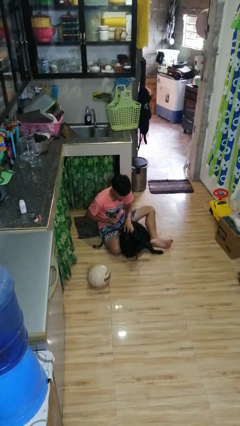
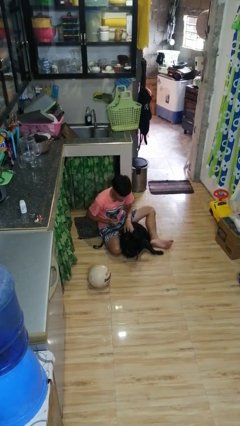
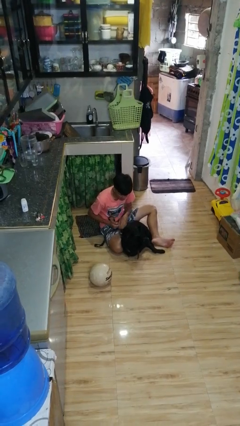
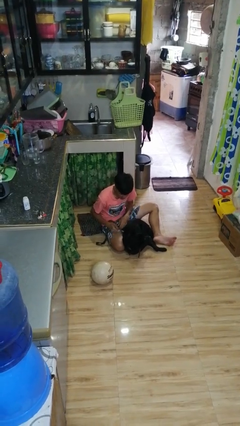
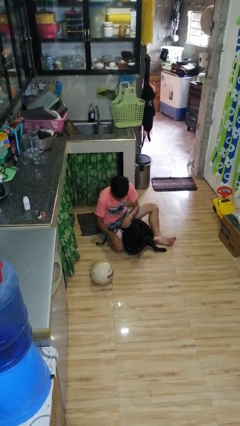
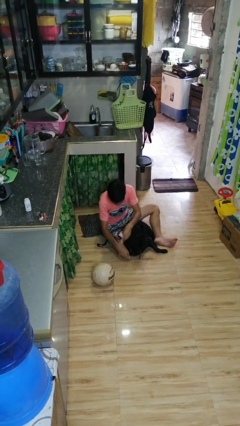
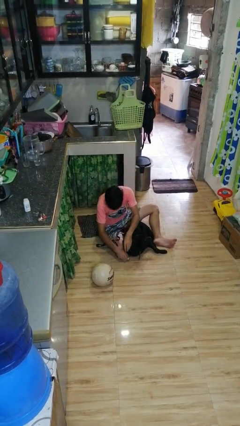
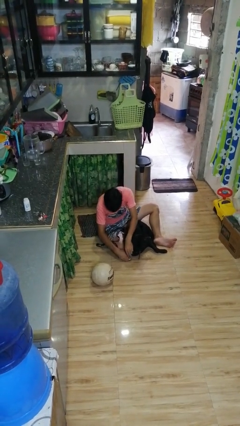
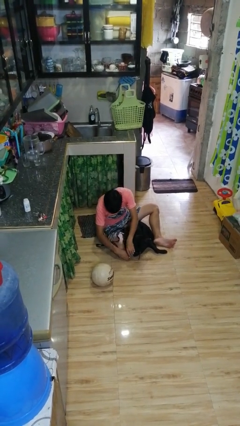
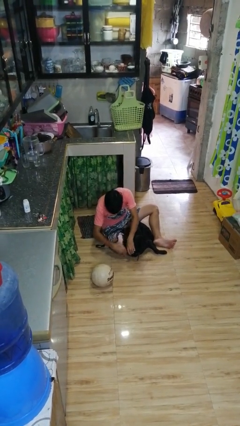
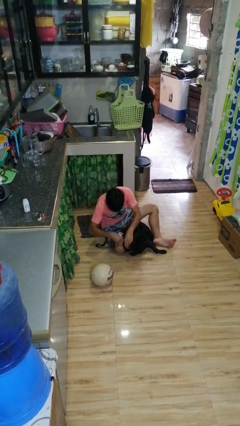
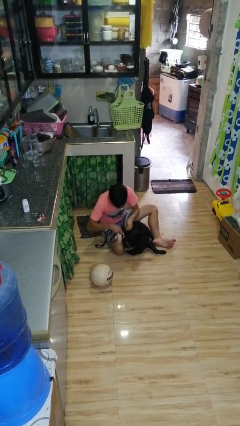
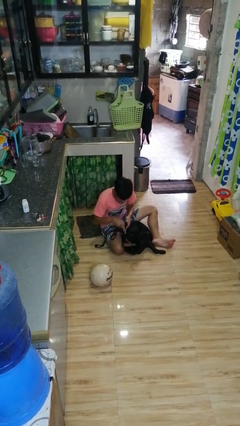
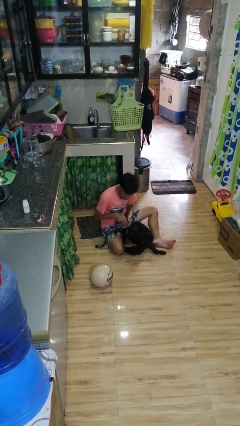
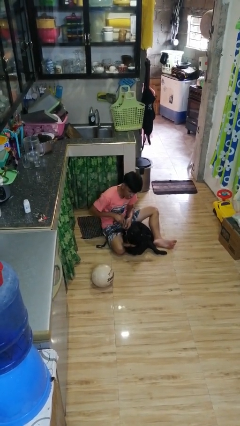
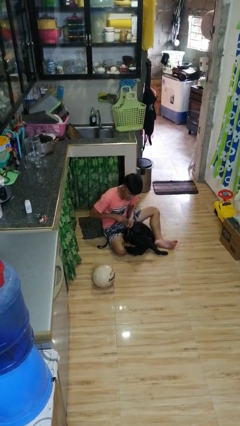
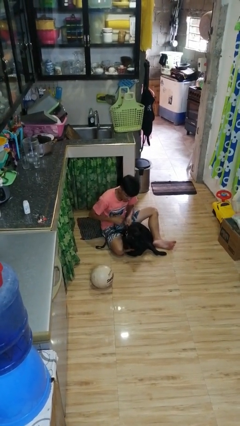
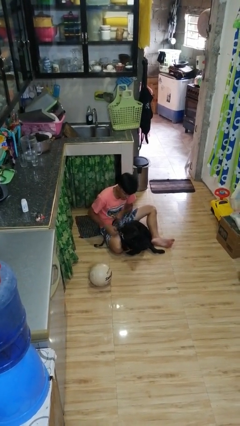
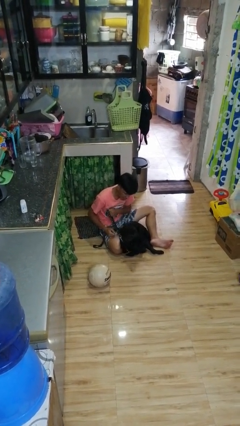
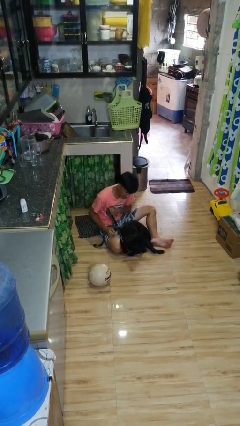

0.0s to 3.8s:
person attaches leash to dog

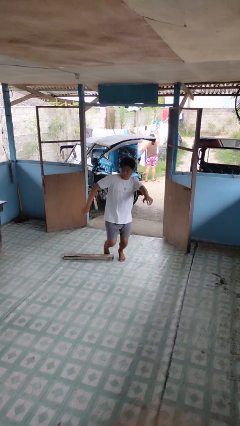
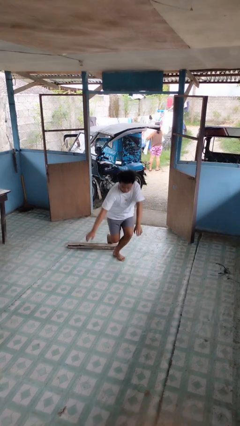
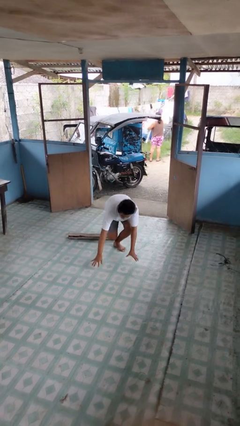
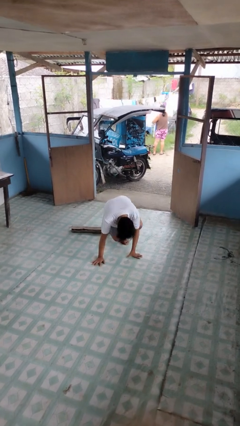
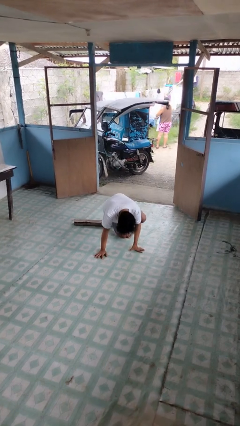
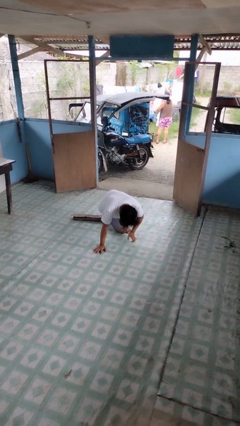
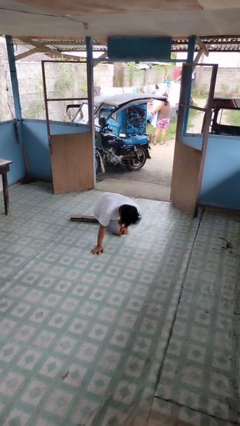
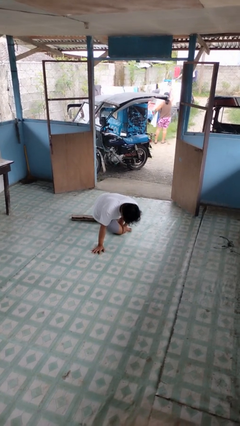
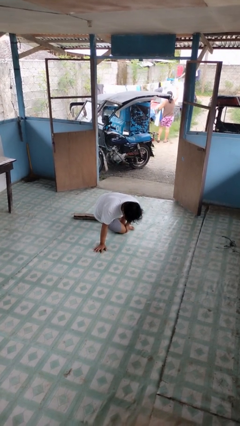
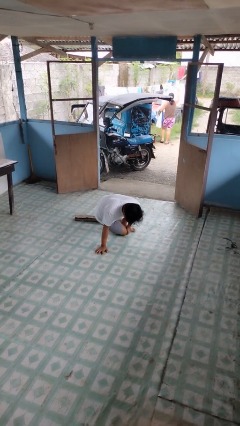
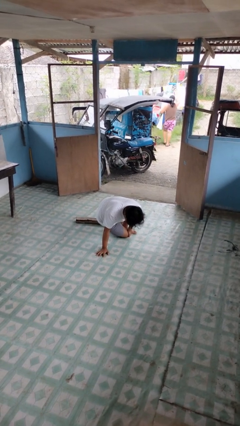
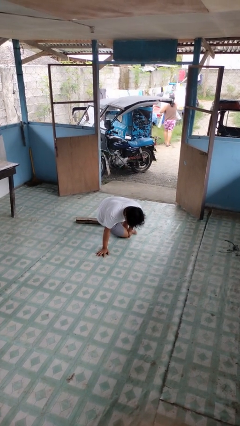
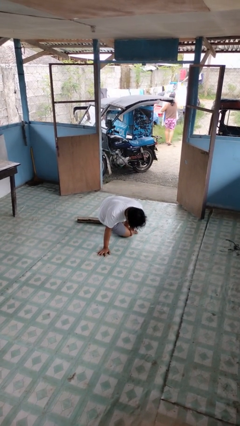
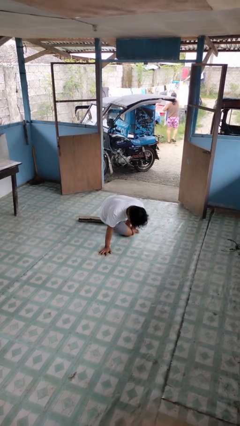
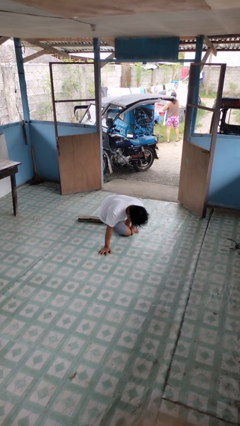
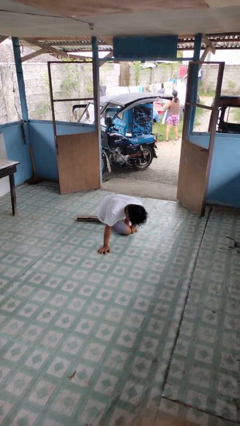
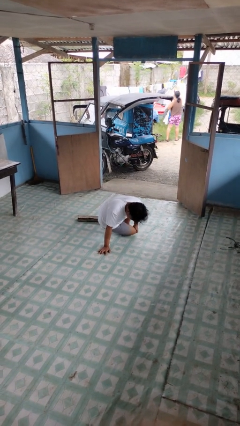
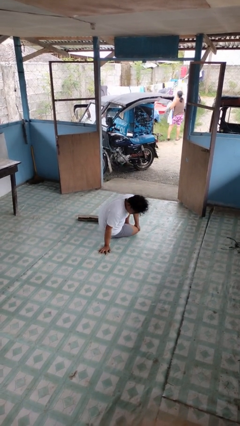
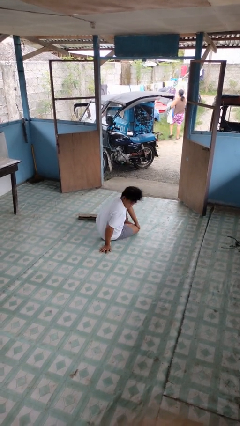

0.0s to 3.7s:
person trips on object on floor

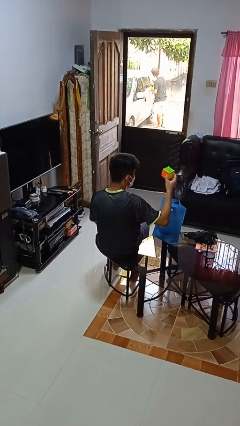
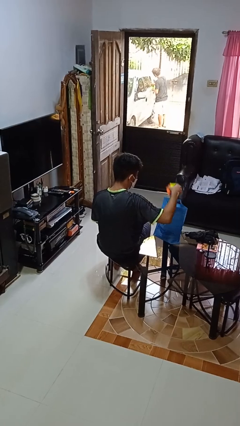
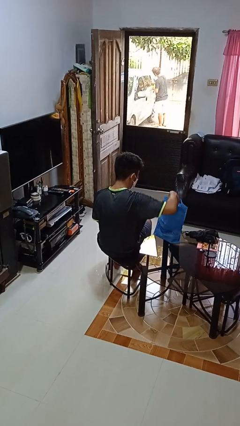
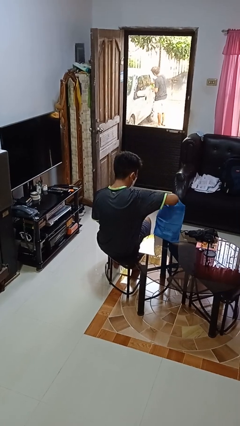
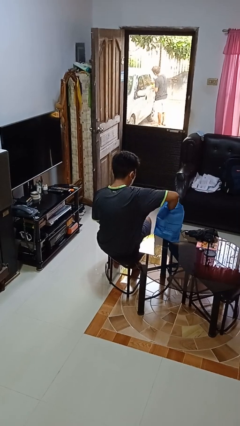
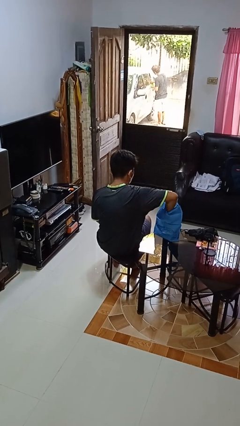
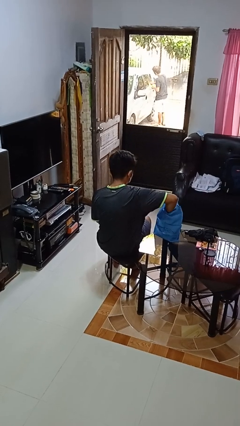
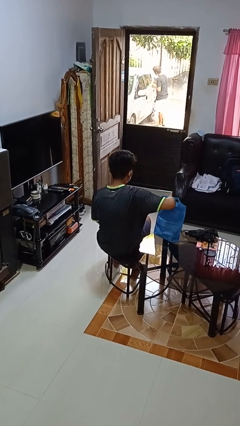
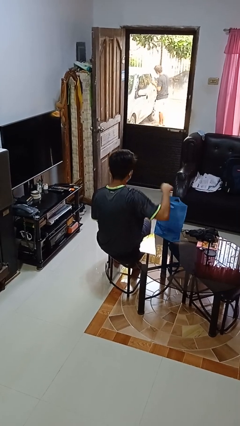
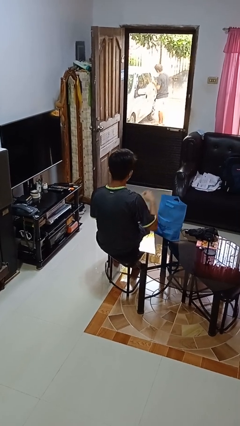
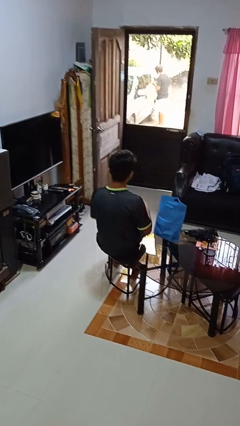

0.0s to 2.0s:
person puts object into bag

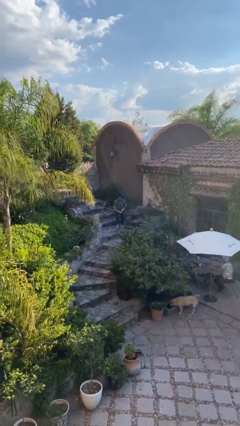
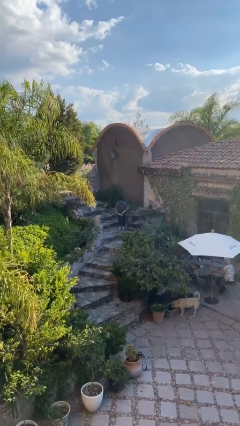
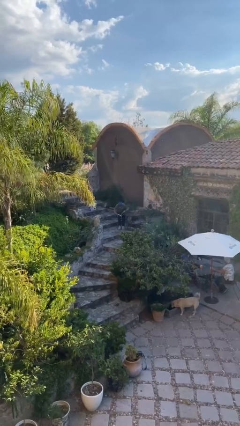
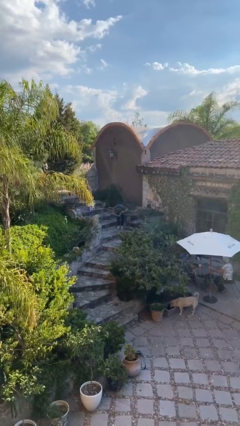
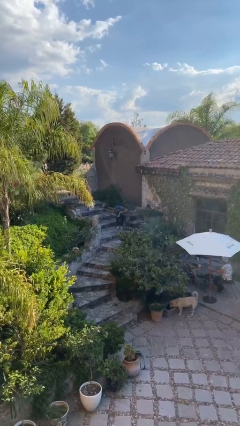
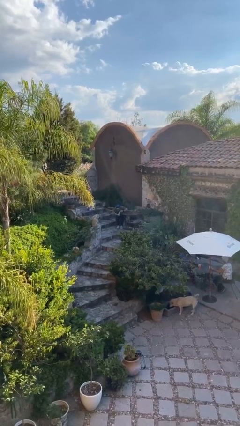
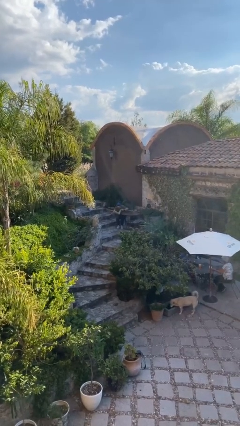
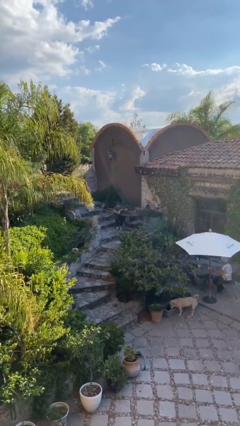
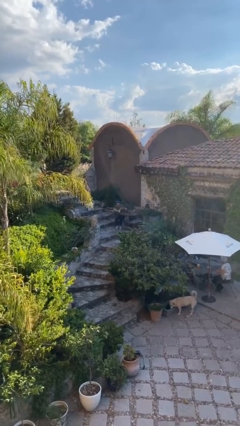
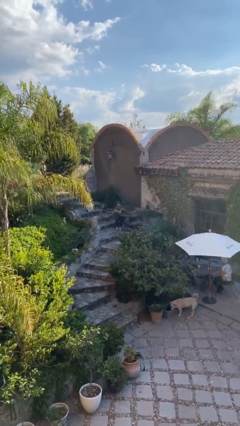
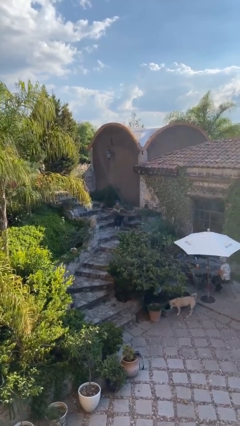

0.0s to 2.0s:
person sits down

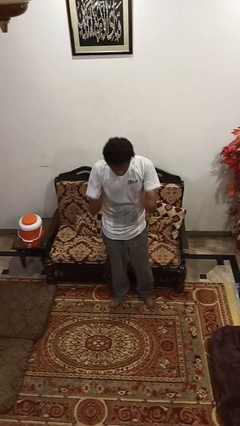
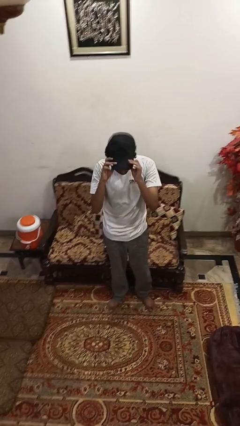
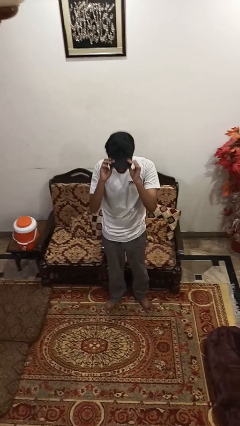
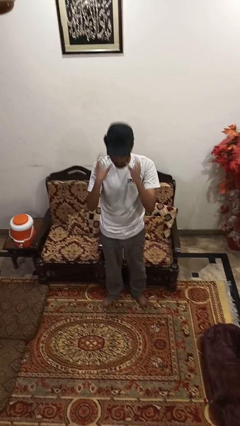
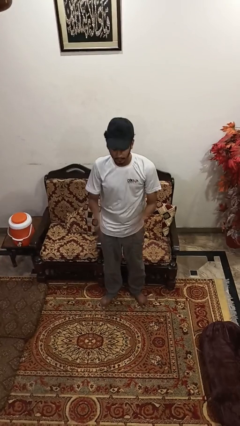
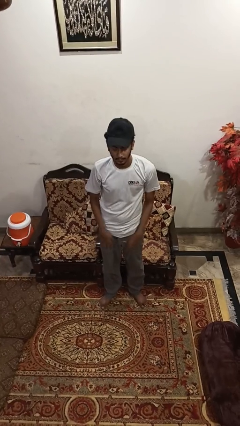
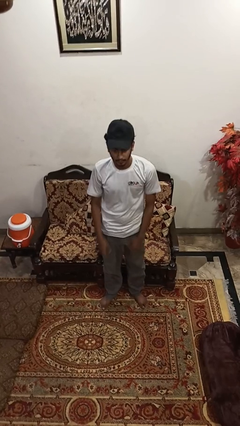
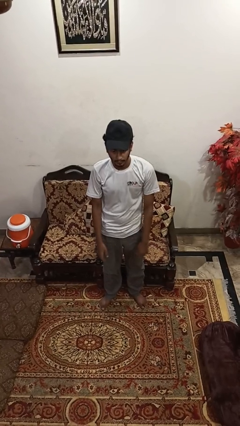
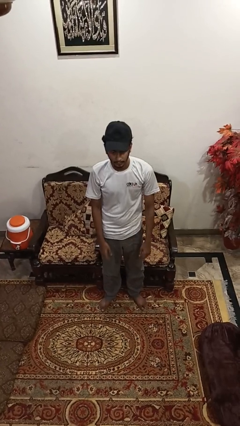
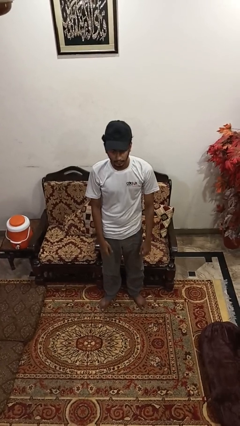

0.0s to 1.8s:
person puts on hat

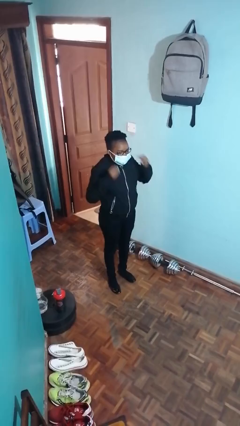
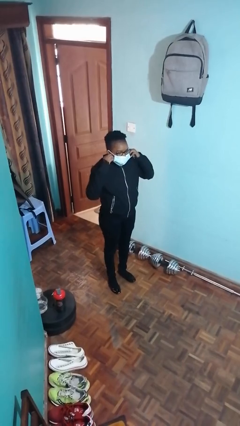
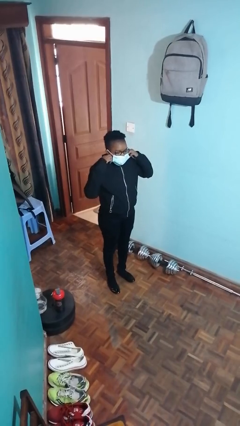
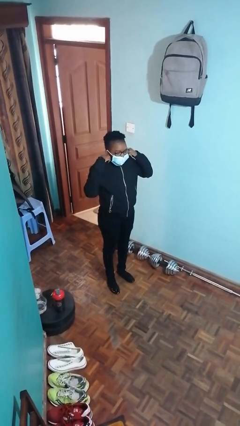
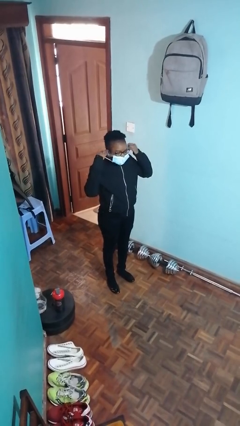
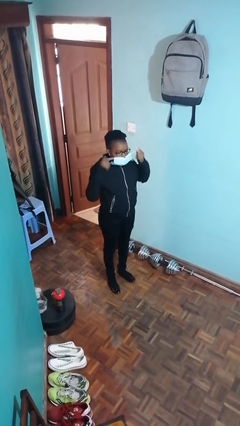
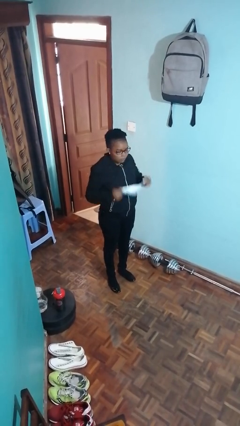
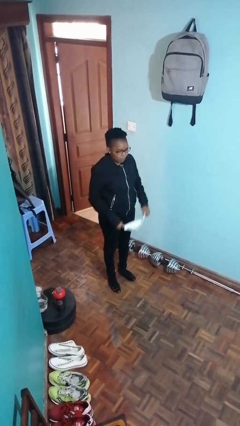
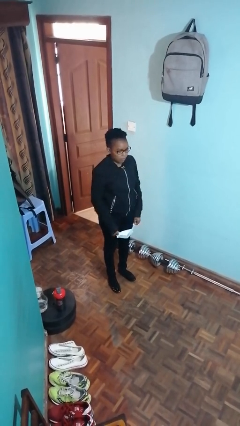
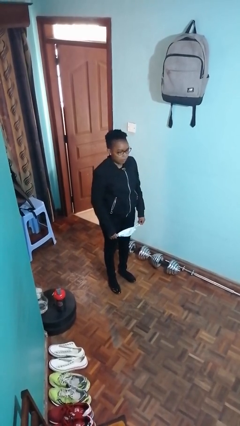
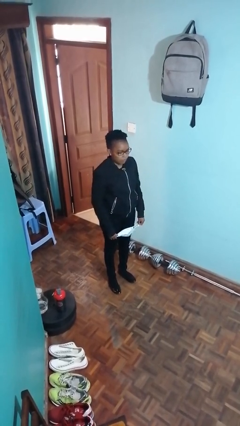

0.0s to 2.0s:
person takes off facemask

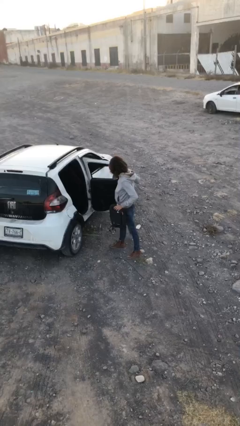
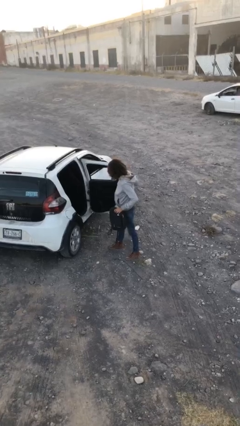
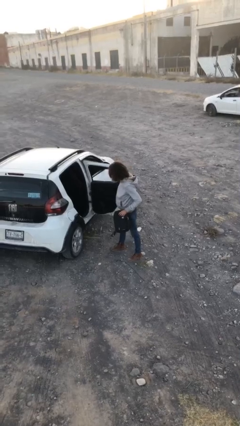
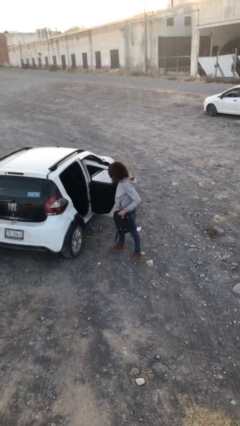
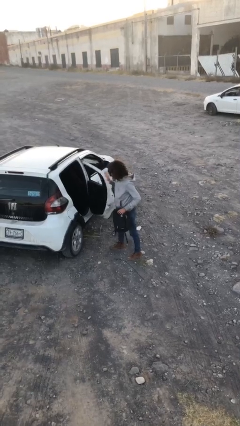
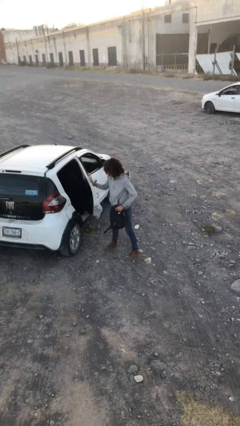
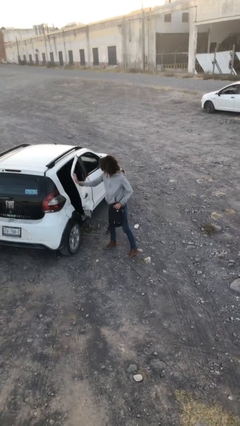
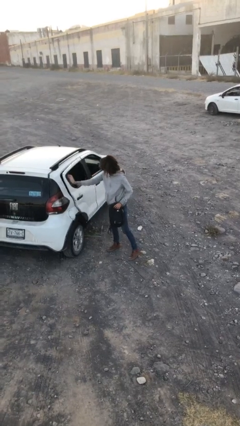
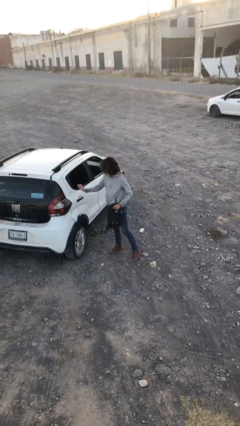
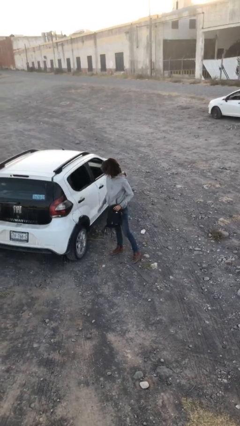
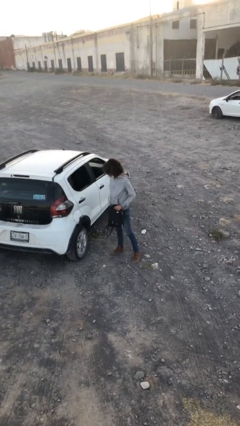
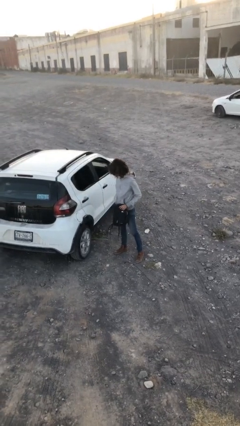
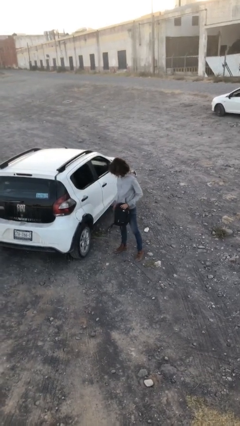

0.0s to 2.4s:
person closes car door
